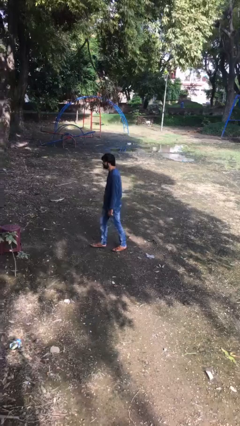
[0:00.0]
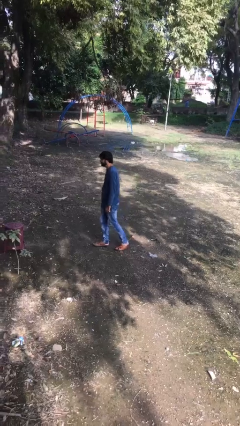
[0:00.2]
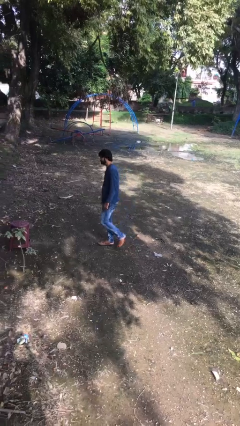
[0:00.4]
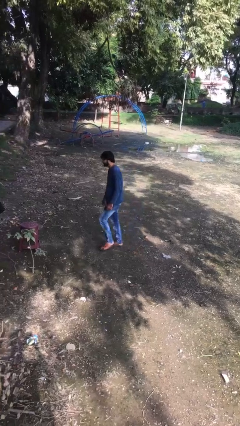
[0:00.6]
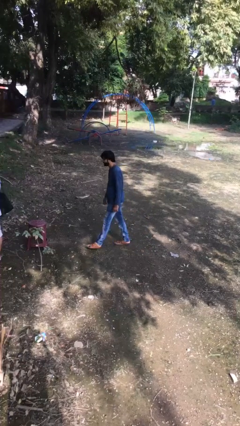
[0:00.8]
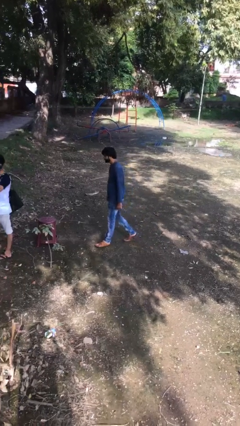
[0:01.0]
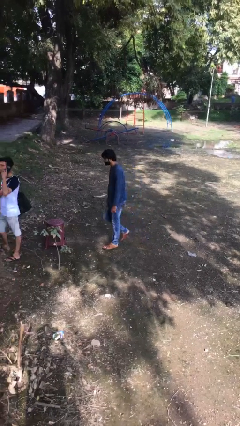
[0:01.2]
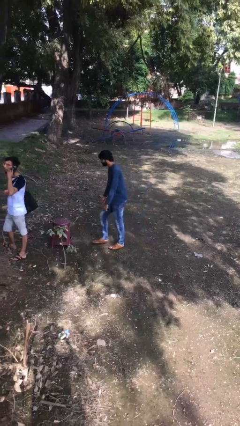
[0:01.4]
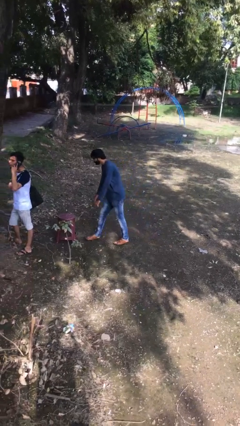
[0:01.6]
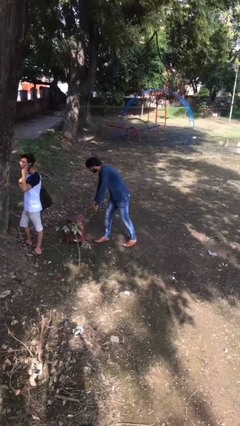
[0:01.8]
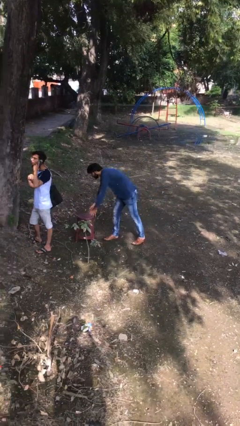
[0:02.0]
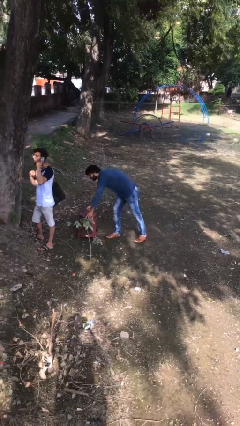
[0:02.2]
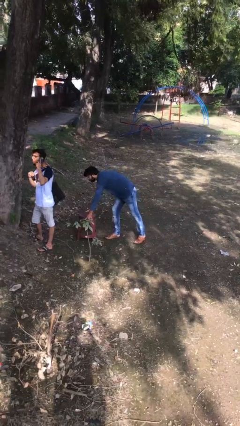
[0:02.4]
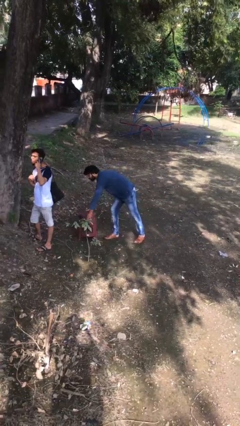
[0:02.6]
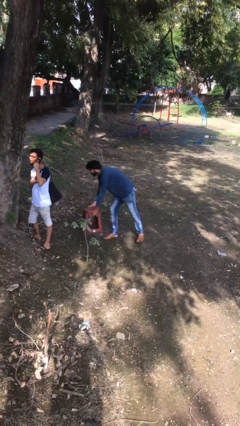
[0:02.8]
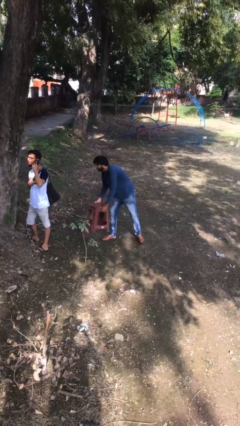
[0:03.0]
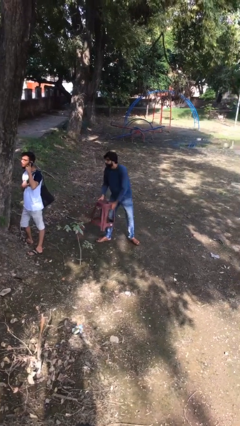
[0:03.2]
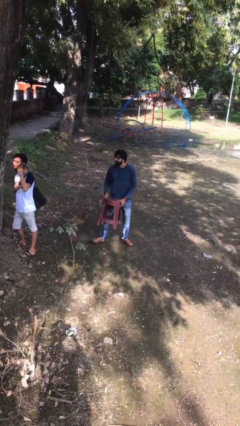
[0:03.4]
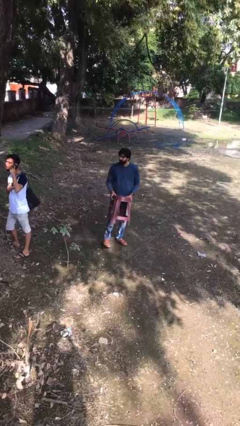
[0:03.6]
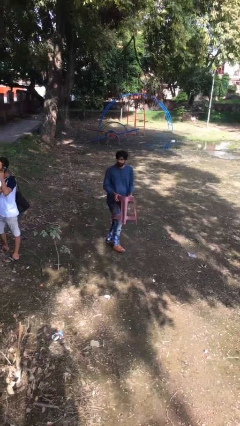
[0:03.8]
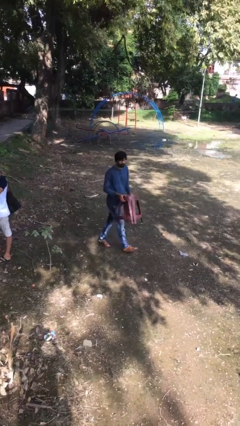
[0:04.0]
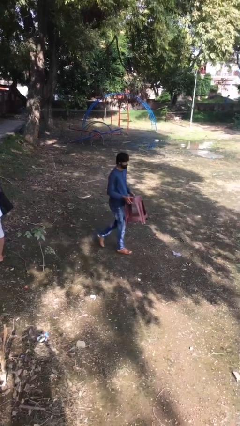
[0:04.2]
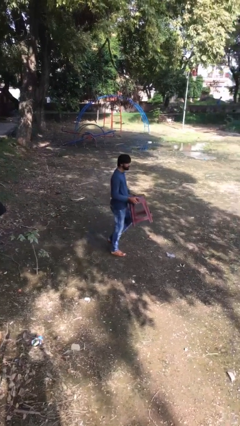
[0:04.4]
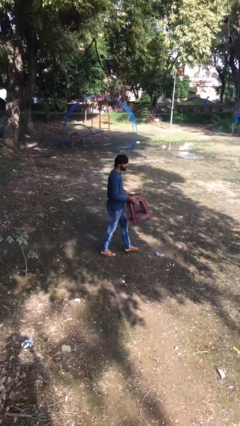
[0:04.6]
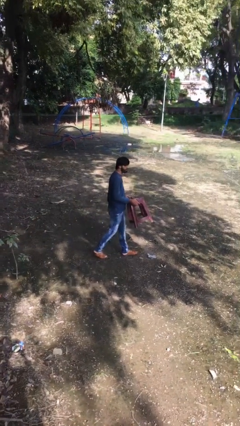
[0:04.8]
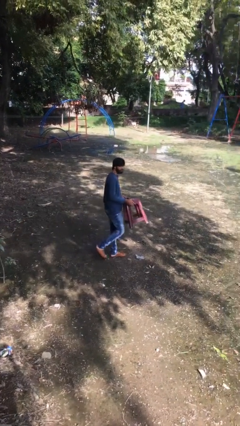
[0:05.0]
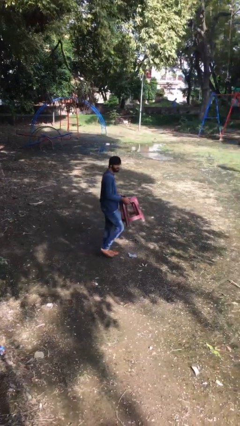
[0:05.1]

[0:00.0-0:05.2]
person steals object from person

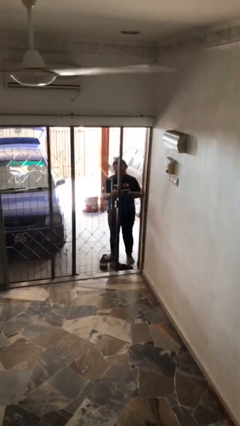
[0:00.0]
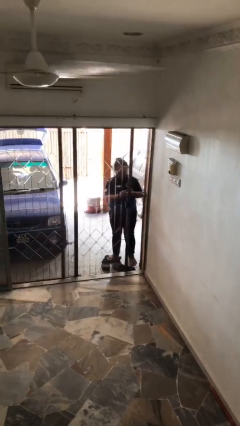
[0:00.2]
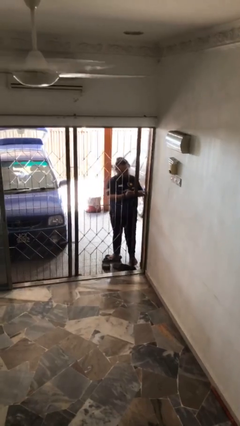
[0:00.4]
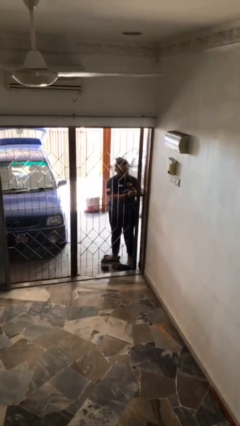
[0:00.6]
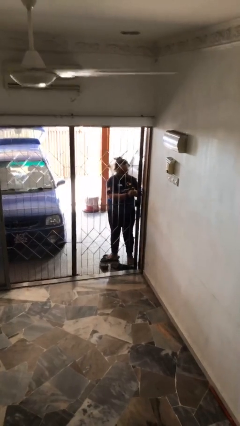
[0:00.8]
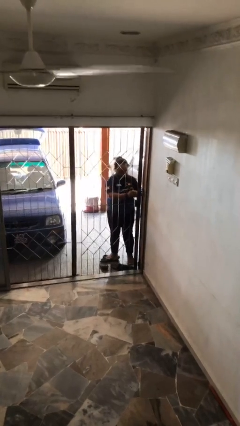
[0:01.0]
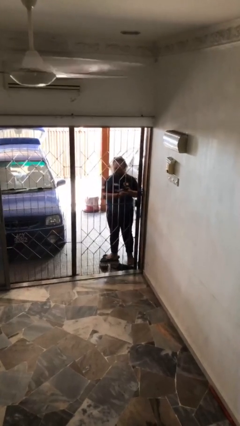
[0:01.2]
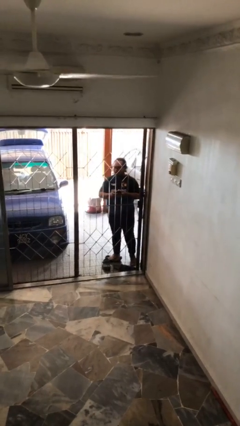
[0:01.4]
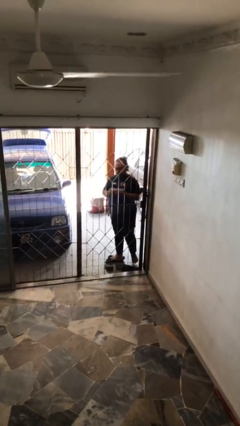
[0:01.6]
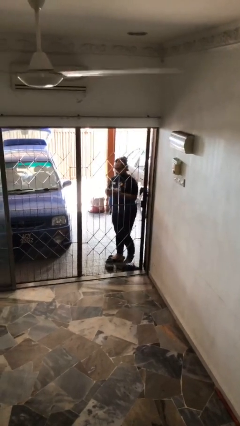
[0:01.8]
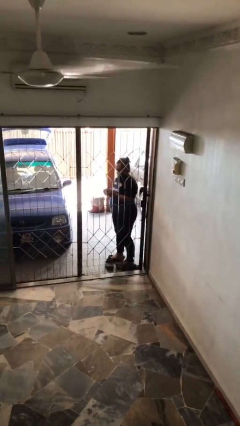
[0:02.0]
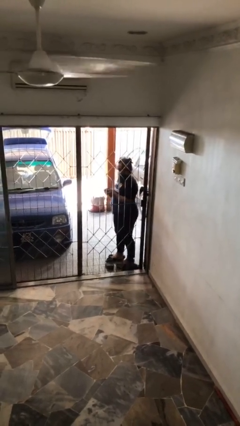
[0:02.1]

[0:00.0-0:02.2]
person closes facility door

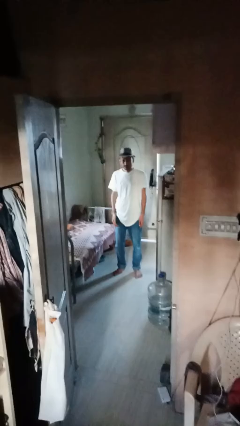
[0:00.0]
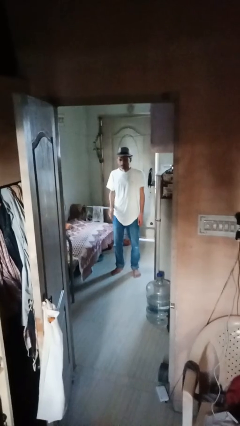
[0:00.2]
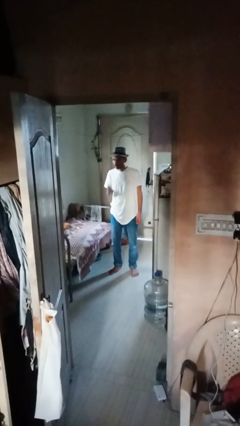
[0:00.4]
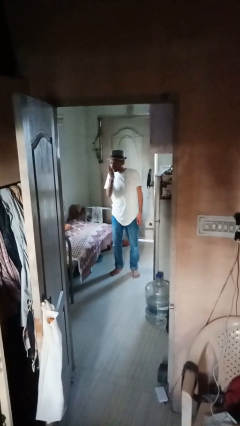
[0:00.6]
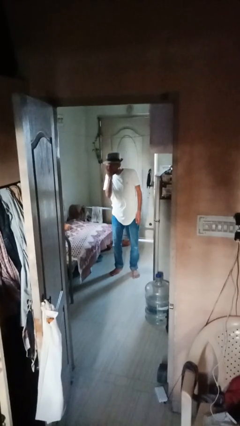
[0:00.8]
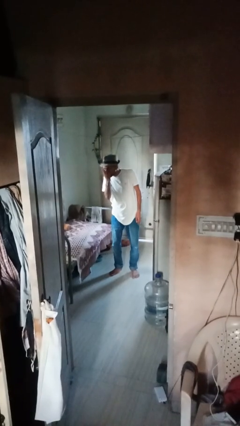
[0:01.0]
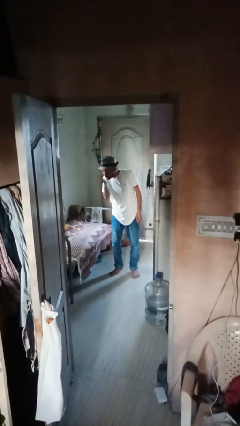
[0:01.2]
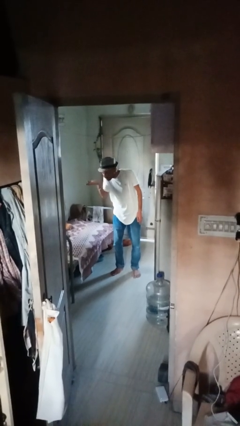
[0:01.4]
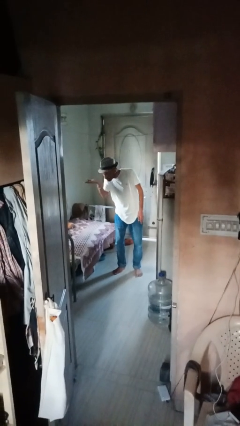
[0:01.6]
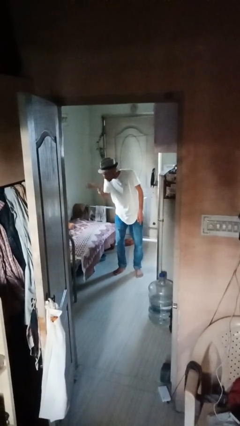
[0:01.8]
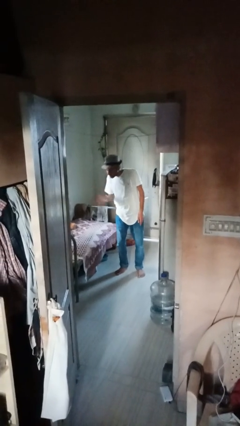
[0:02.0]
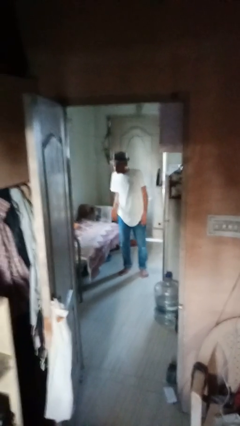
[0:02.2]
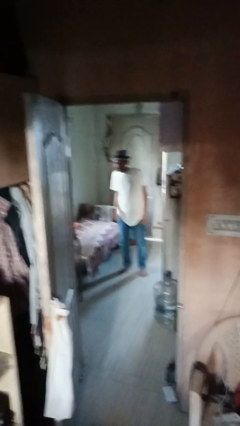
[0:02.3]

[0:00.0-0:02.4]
person gestures blow kiss

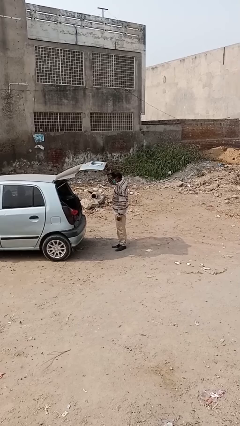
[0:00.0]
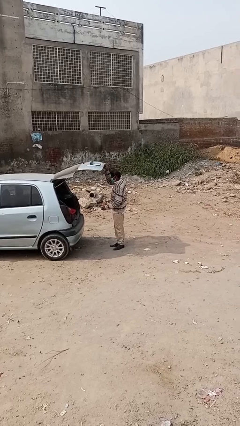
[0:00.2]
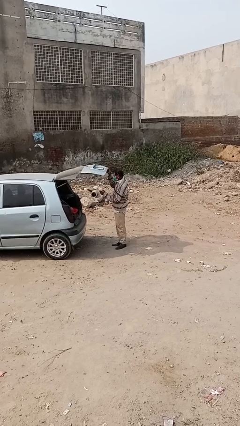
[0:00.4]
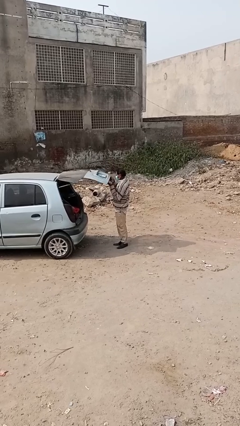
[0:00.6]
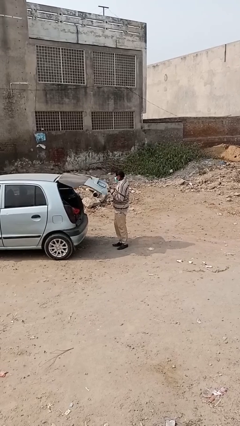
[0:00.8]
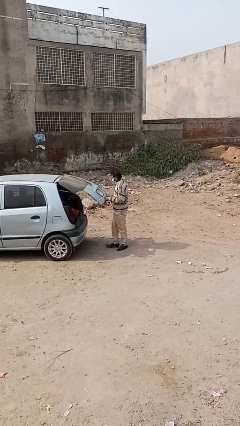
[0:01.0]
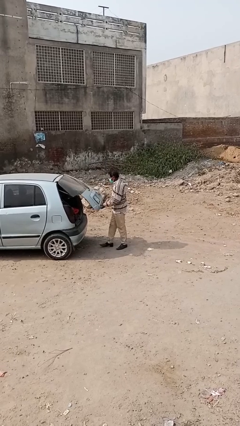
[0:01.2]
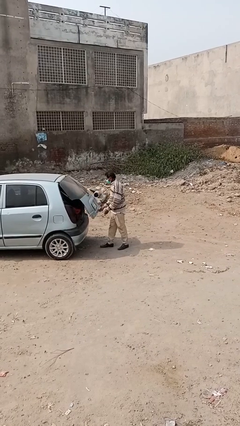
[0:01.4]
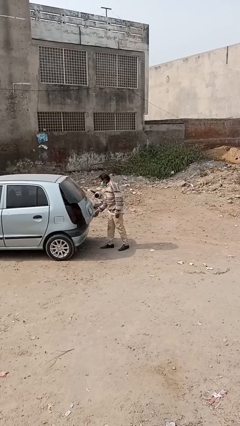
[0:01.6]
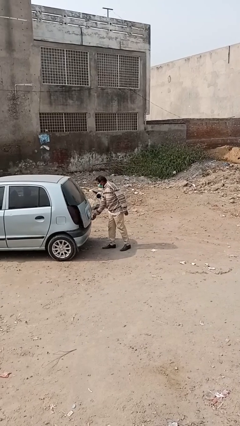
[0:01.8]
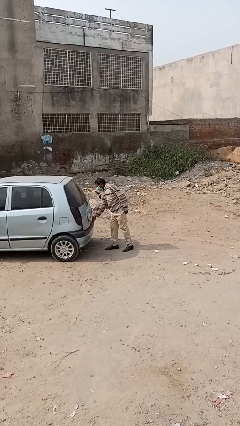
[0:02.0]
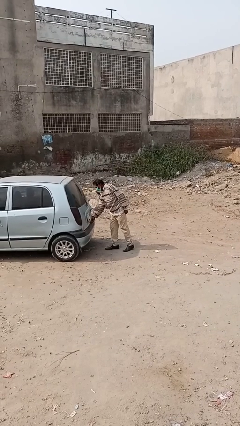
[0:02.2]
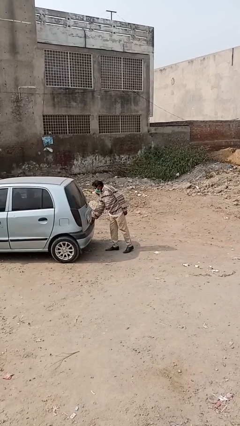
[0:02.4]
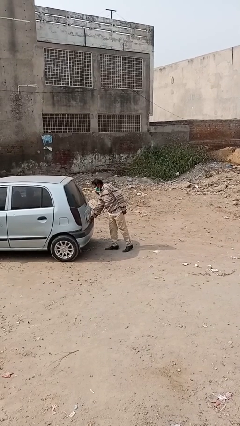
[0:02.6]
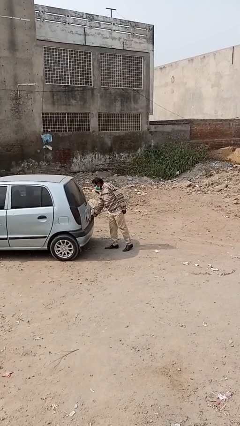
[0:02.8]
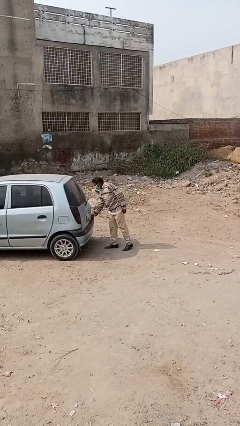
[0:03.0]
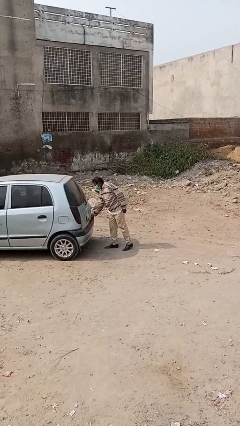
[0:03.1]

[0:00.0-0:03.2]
person closes car trunk

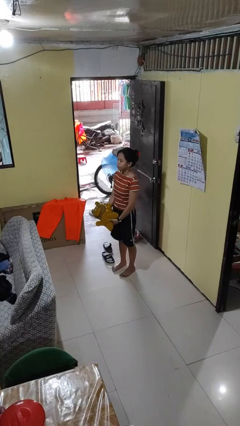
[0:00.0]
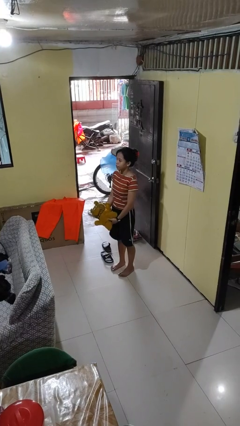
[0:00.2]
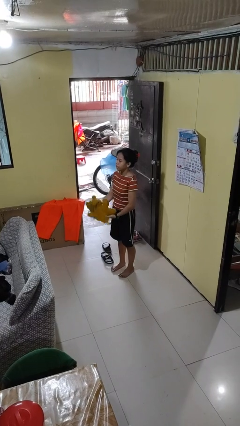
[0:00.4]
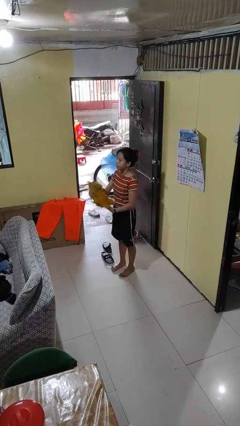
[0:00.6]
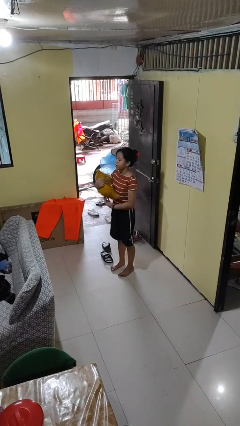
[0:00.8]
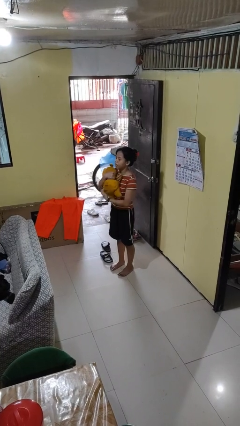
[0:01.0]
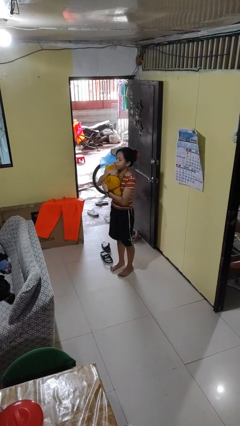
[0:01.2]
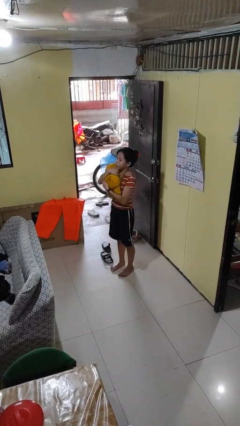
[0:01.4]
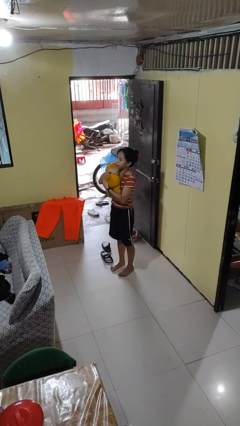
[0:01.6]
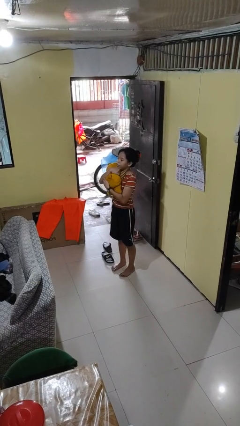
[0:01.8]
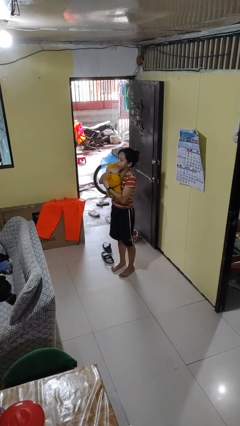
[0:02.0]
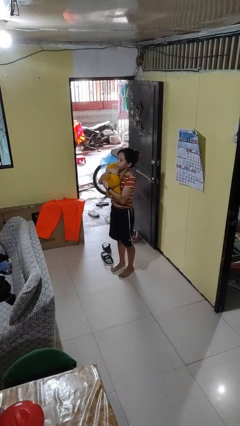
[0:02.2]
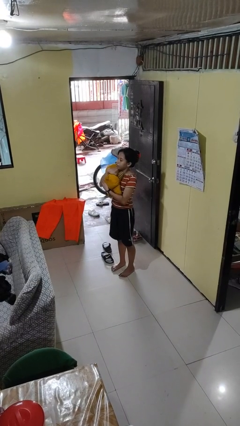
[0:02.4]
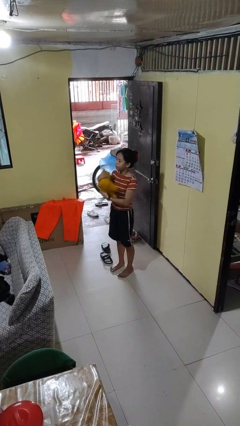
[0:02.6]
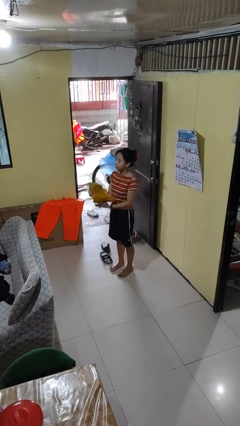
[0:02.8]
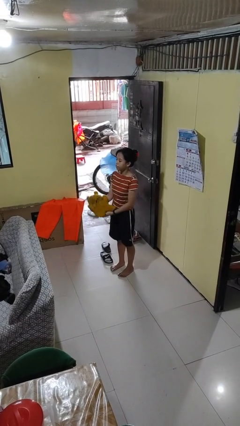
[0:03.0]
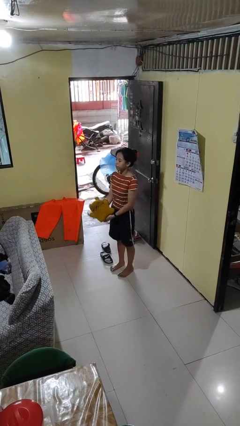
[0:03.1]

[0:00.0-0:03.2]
person hugs stuffed animal

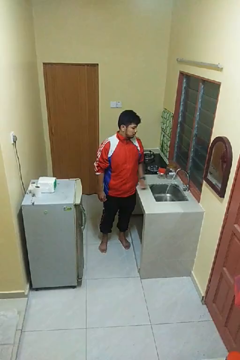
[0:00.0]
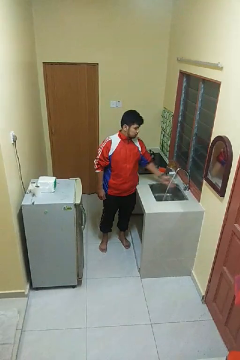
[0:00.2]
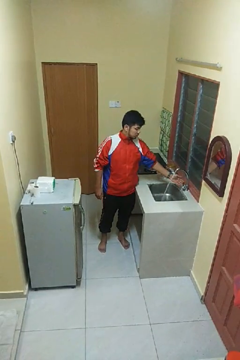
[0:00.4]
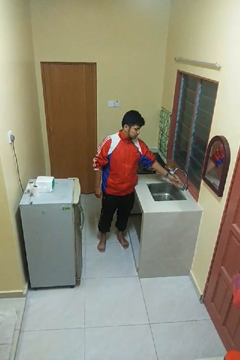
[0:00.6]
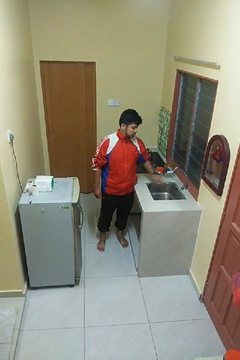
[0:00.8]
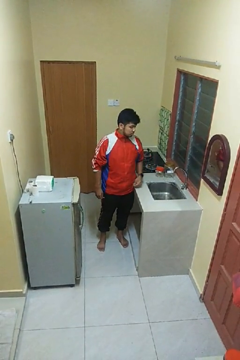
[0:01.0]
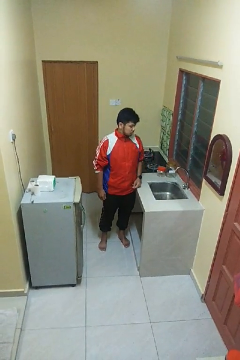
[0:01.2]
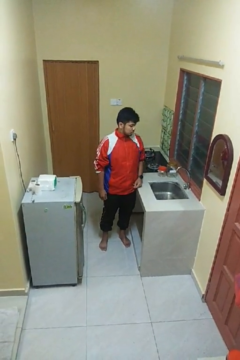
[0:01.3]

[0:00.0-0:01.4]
person turns off faucet

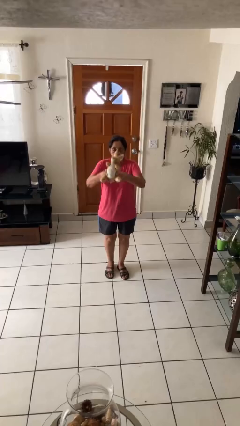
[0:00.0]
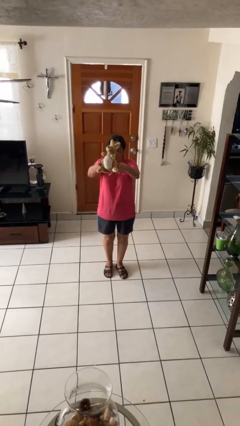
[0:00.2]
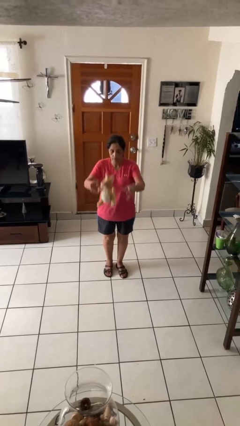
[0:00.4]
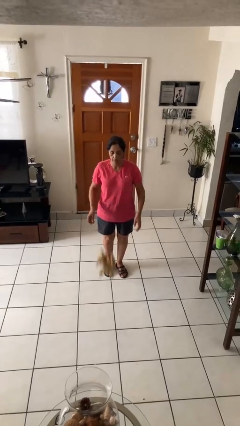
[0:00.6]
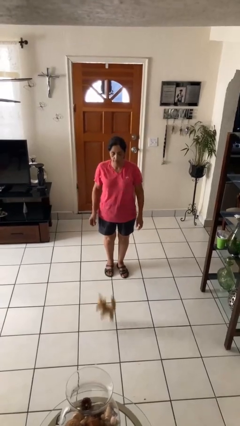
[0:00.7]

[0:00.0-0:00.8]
person throws object into air
